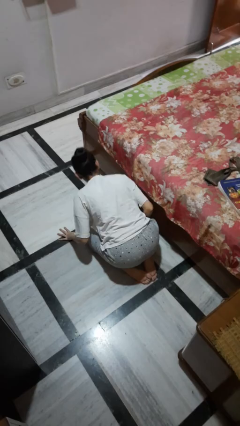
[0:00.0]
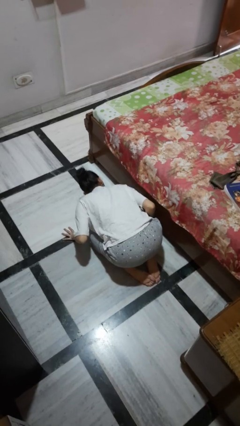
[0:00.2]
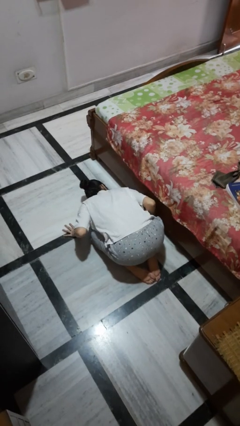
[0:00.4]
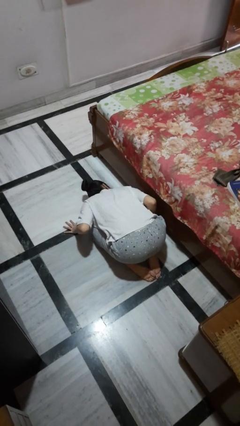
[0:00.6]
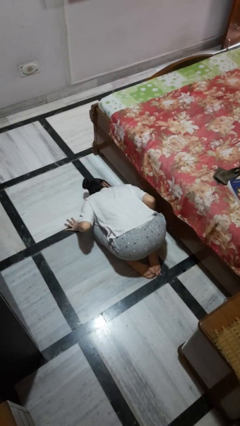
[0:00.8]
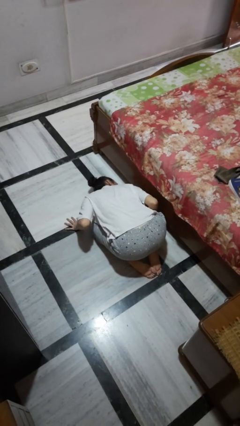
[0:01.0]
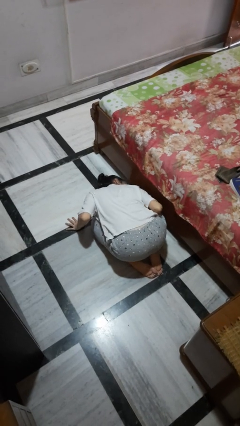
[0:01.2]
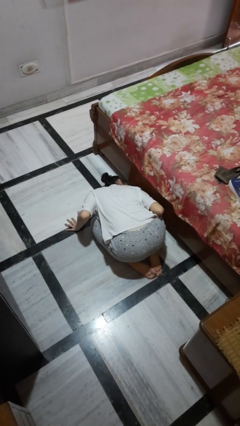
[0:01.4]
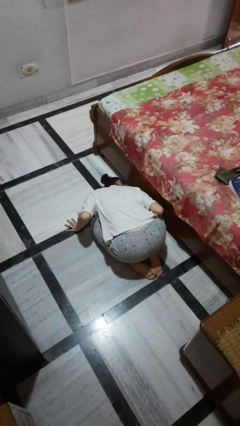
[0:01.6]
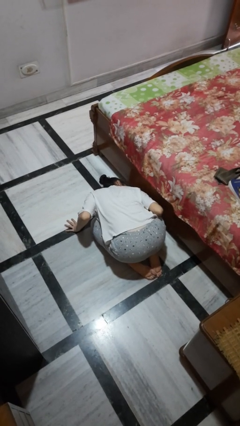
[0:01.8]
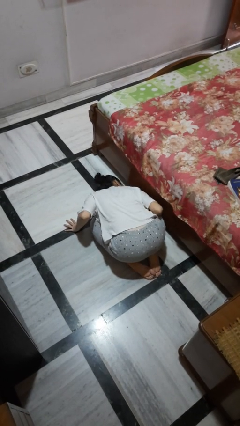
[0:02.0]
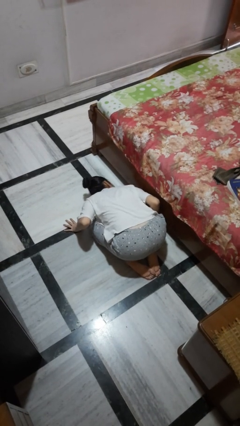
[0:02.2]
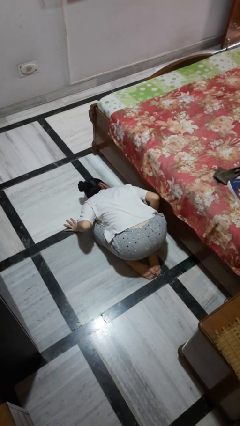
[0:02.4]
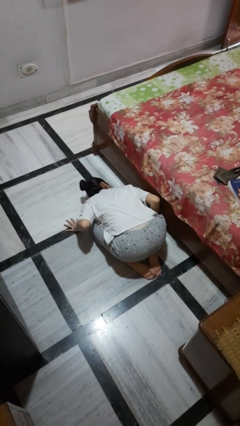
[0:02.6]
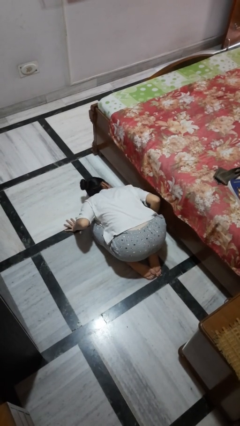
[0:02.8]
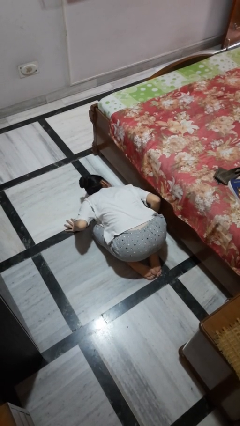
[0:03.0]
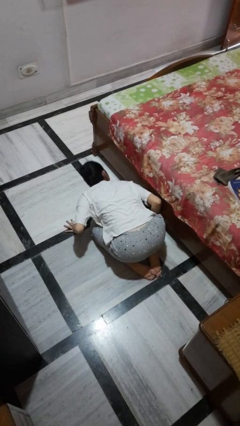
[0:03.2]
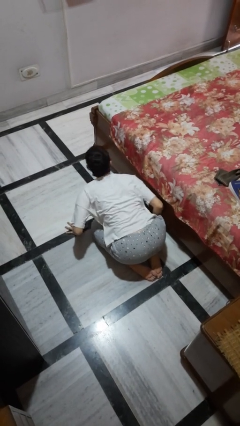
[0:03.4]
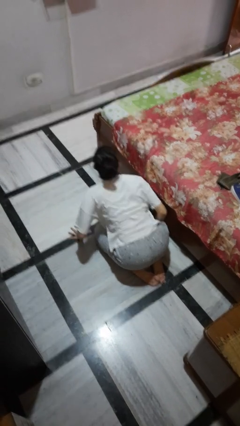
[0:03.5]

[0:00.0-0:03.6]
person searches under bed

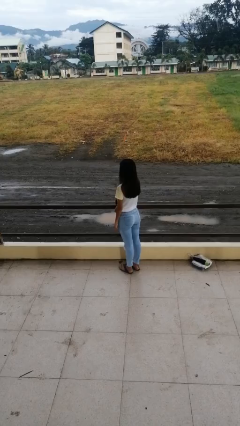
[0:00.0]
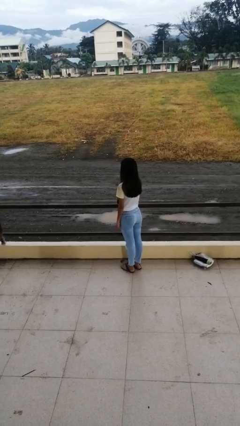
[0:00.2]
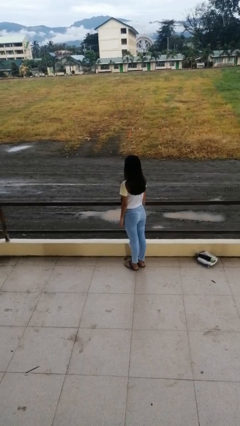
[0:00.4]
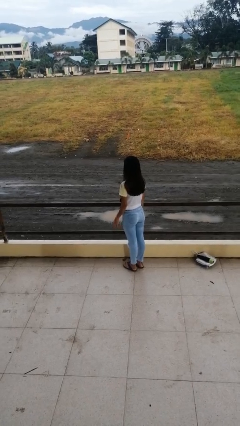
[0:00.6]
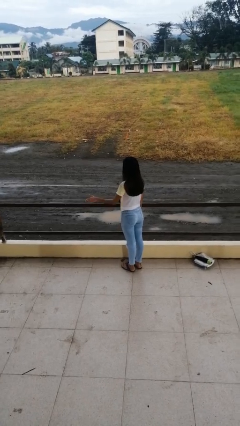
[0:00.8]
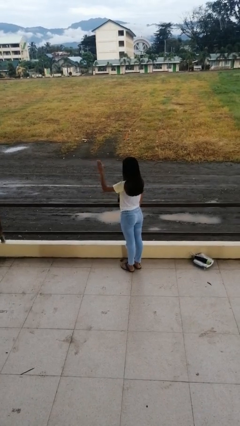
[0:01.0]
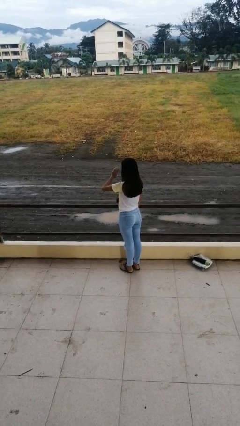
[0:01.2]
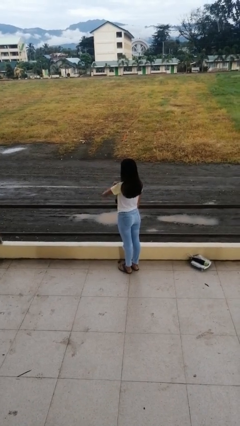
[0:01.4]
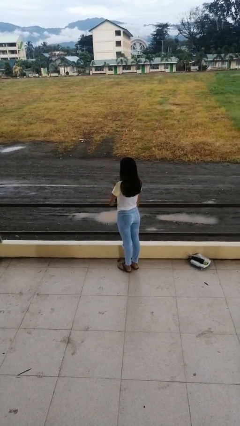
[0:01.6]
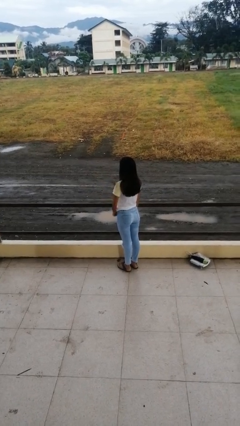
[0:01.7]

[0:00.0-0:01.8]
person gestures swipe right

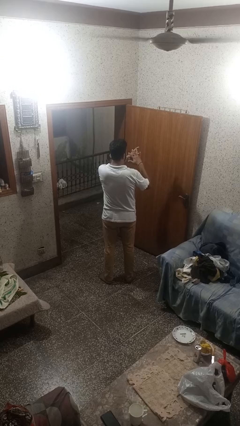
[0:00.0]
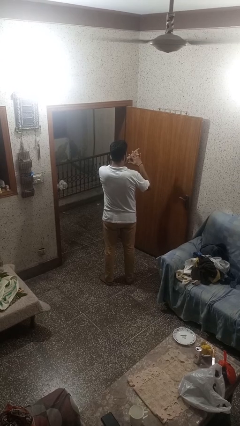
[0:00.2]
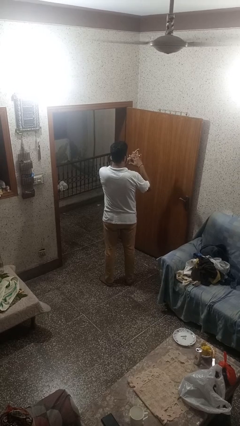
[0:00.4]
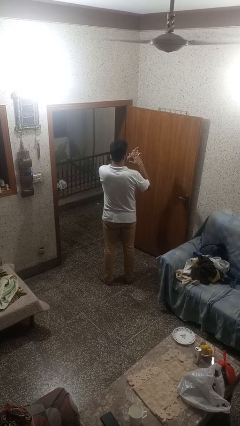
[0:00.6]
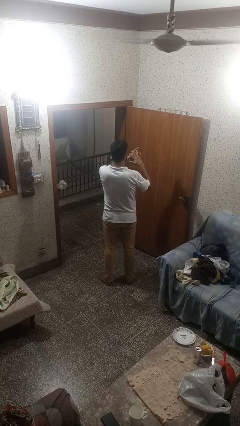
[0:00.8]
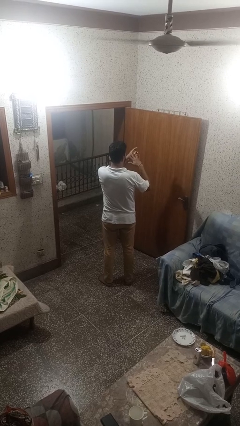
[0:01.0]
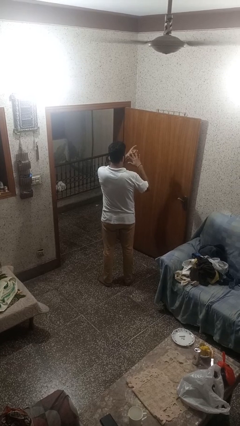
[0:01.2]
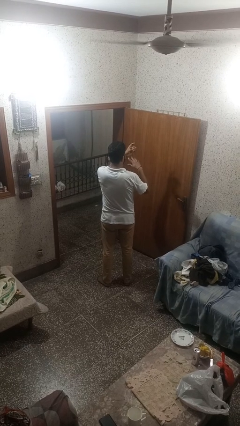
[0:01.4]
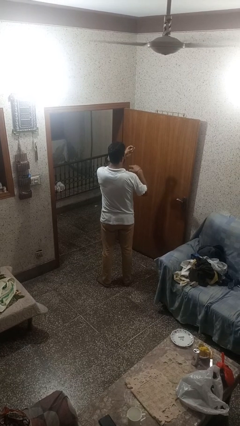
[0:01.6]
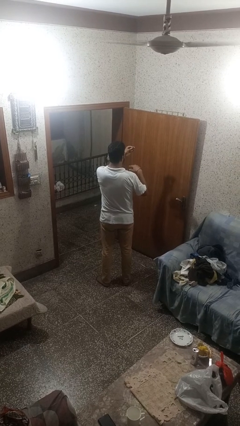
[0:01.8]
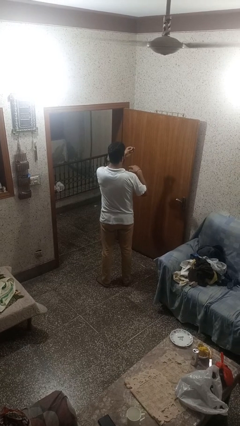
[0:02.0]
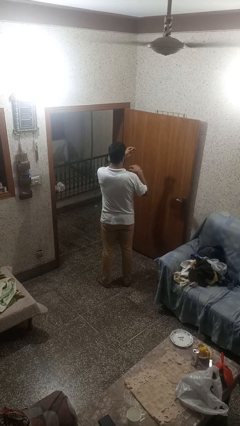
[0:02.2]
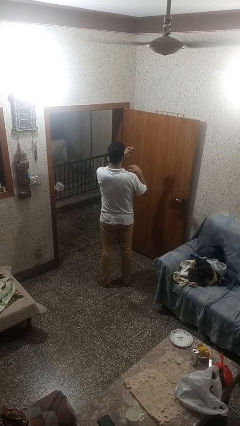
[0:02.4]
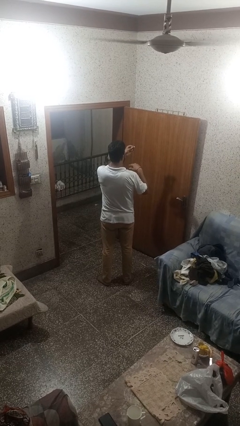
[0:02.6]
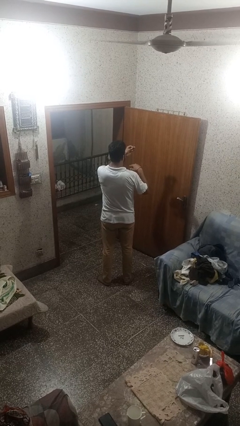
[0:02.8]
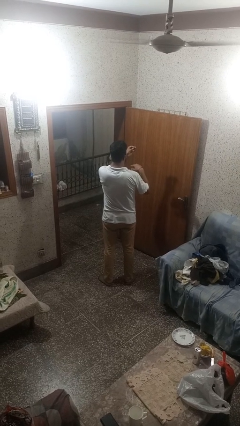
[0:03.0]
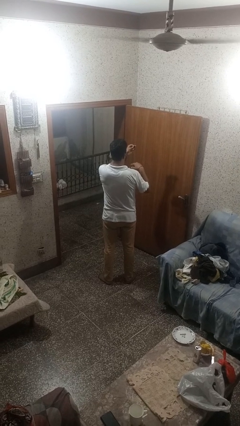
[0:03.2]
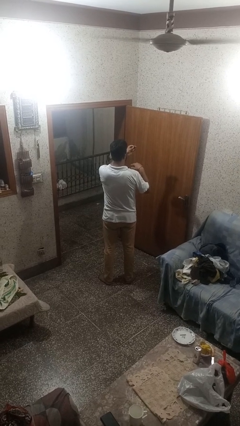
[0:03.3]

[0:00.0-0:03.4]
person takes off ring

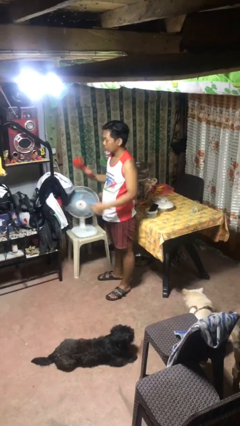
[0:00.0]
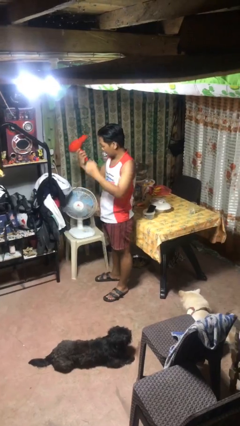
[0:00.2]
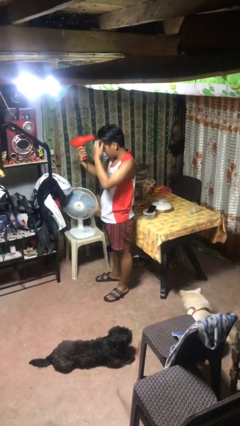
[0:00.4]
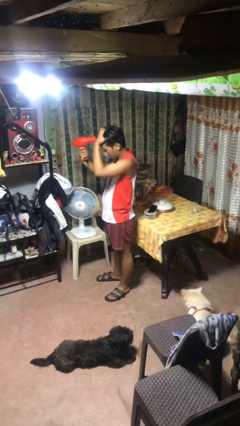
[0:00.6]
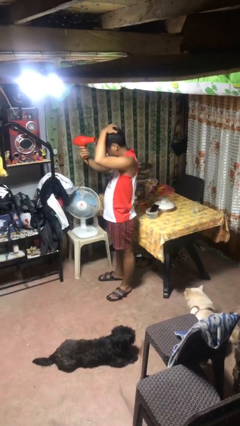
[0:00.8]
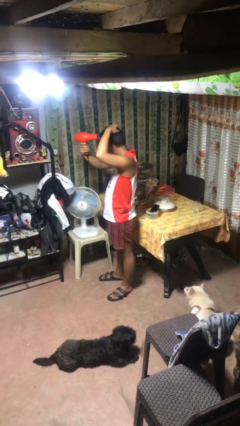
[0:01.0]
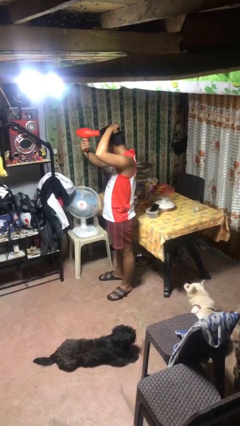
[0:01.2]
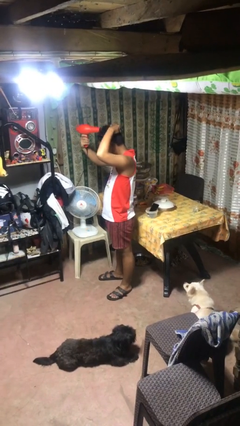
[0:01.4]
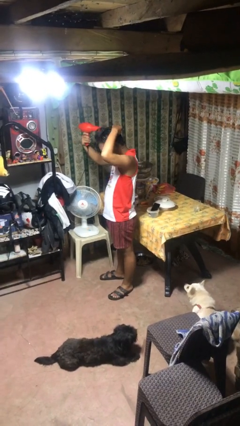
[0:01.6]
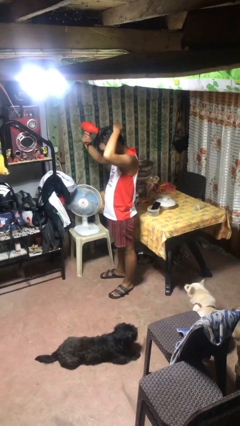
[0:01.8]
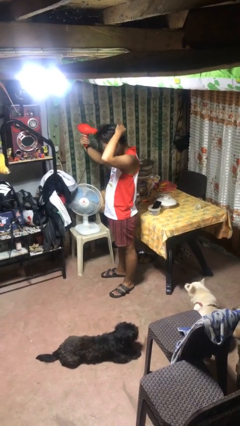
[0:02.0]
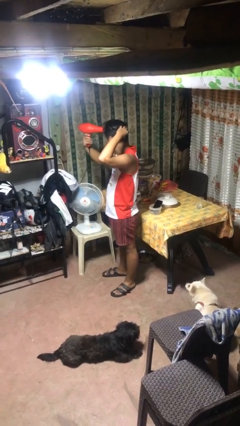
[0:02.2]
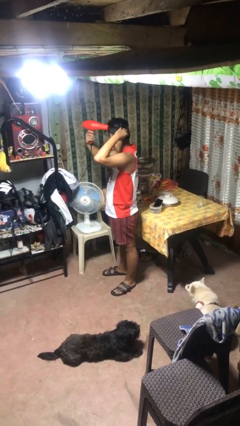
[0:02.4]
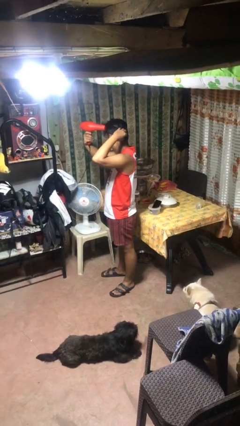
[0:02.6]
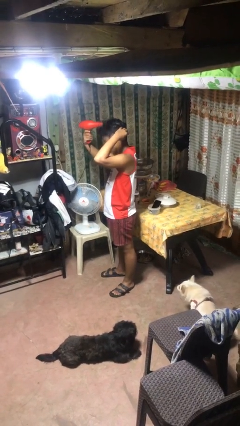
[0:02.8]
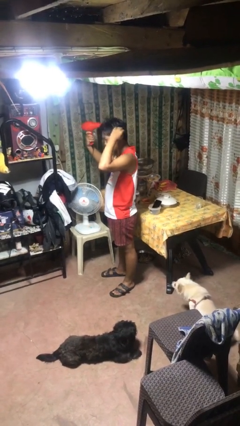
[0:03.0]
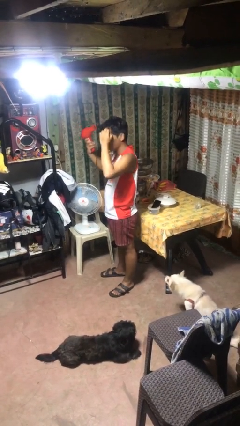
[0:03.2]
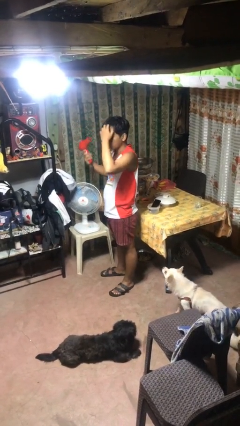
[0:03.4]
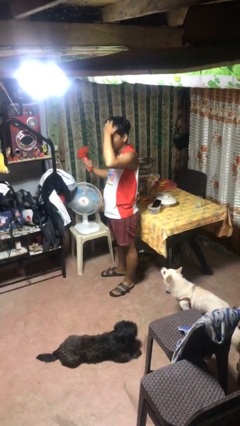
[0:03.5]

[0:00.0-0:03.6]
person dries hair with hairdryer

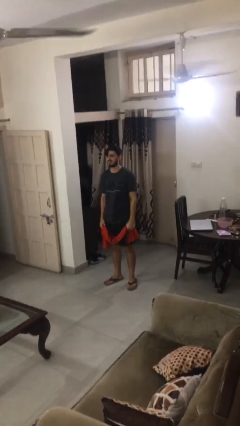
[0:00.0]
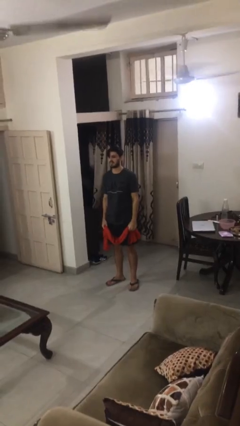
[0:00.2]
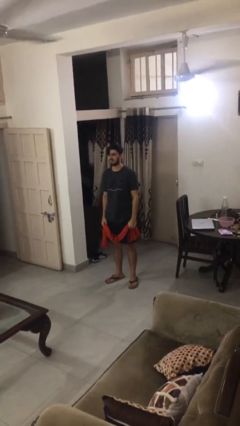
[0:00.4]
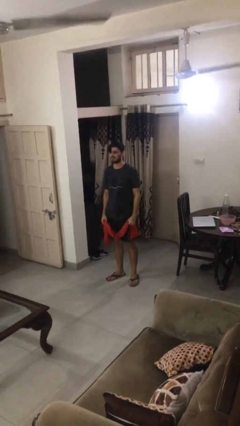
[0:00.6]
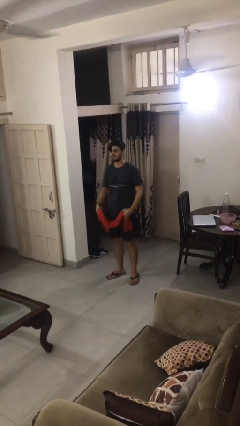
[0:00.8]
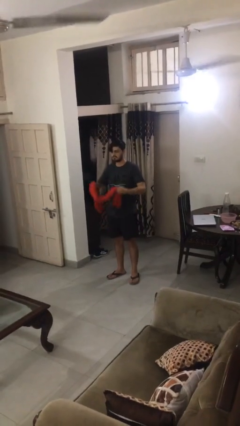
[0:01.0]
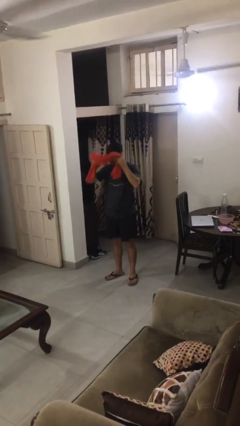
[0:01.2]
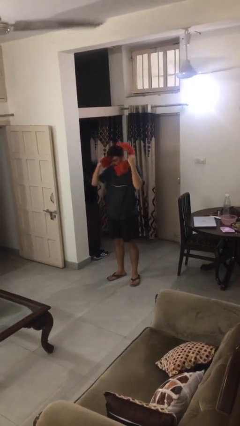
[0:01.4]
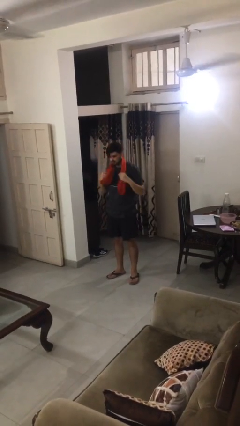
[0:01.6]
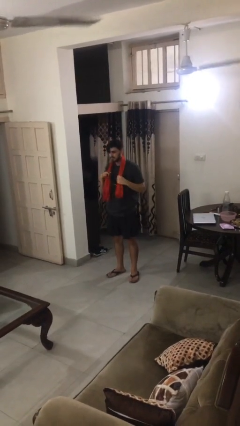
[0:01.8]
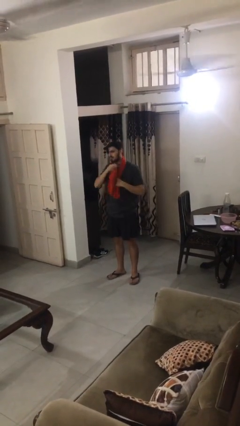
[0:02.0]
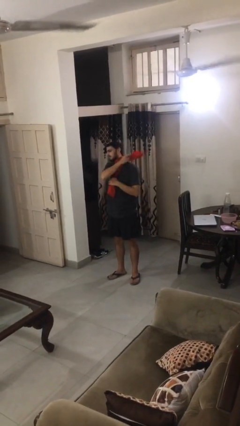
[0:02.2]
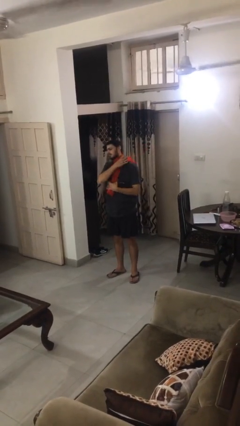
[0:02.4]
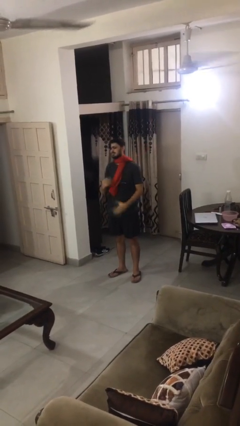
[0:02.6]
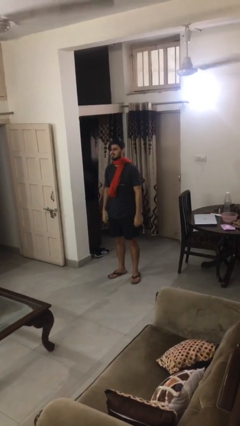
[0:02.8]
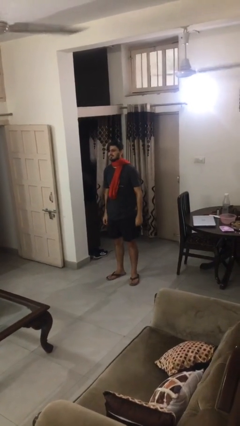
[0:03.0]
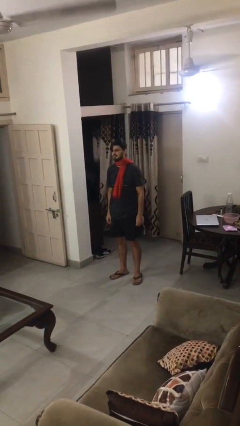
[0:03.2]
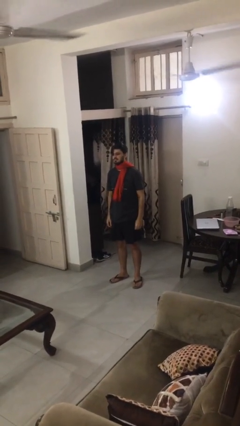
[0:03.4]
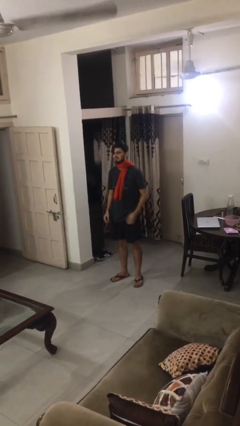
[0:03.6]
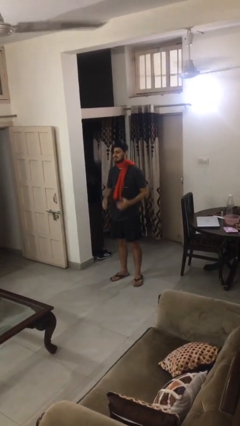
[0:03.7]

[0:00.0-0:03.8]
person puts on scarf

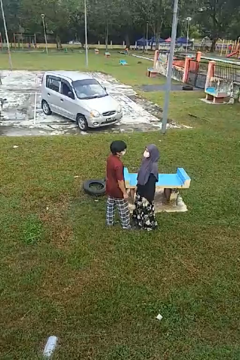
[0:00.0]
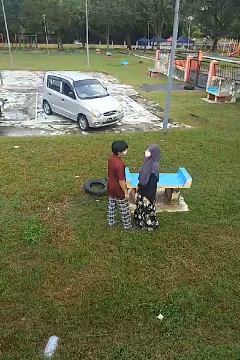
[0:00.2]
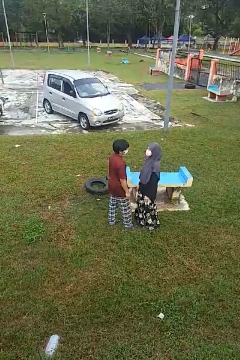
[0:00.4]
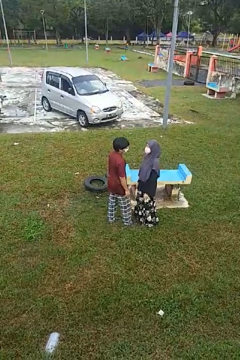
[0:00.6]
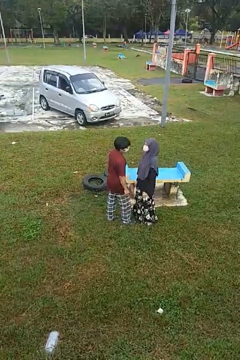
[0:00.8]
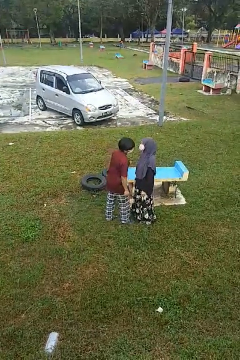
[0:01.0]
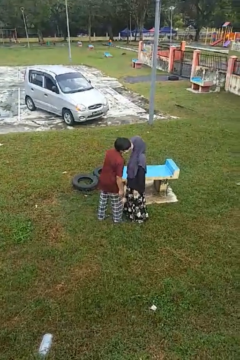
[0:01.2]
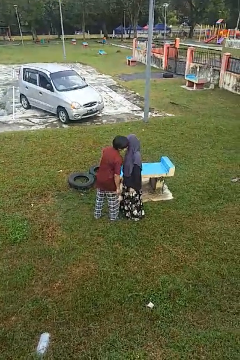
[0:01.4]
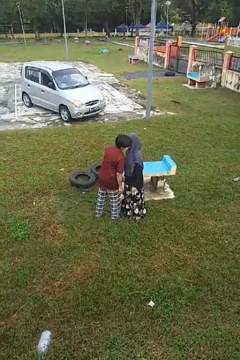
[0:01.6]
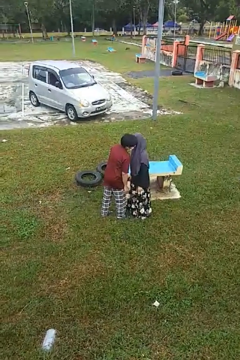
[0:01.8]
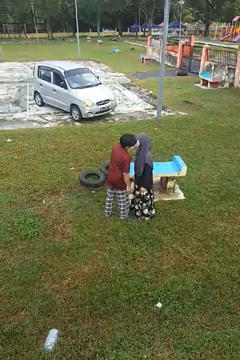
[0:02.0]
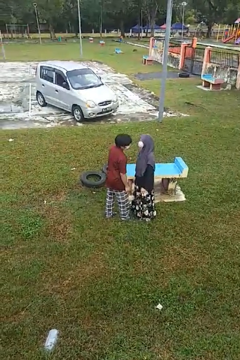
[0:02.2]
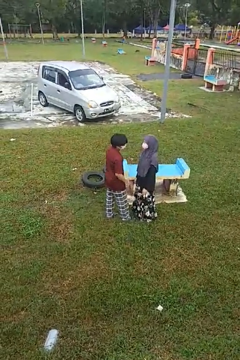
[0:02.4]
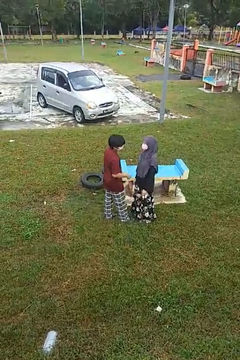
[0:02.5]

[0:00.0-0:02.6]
person kisses cheek of person
